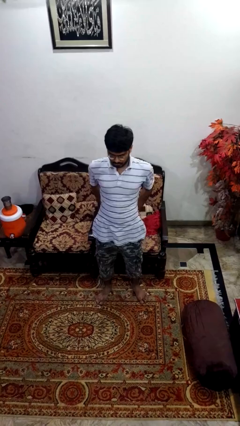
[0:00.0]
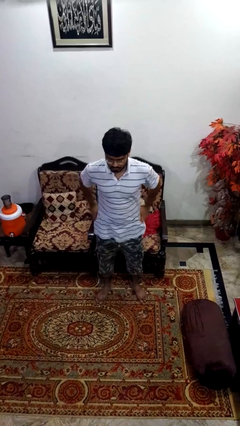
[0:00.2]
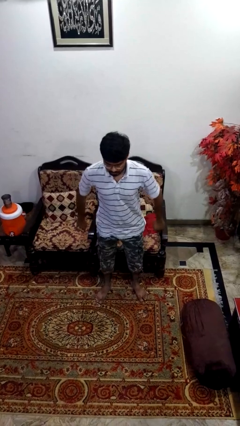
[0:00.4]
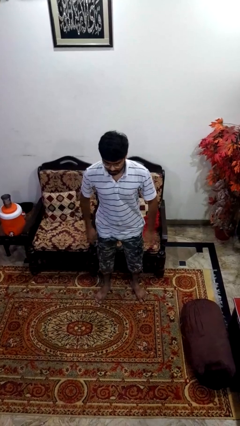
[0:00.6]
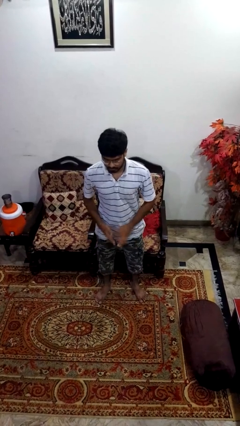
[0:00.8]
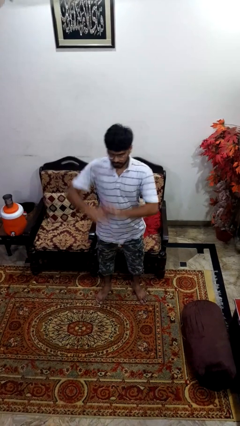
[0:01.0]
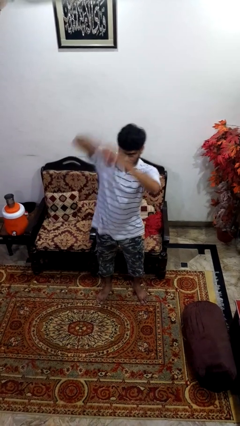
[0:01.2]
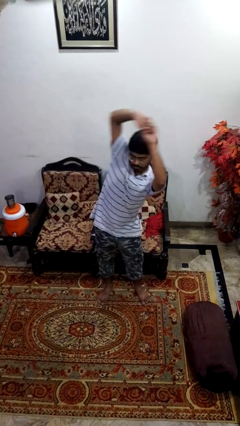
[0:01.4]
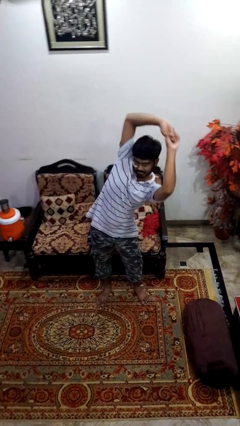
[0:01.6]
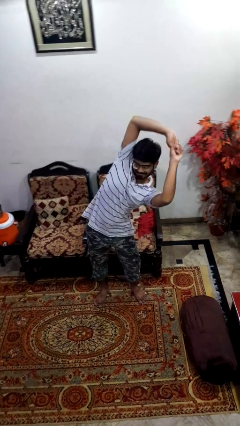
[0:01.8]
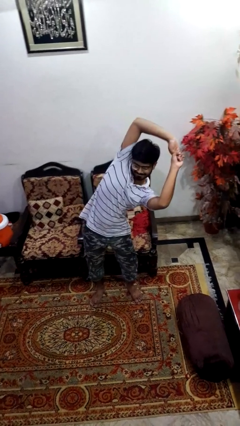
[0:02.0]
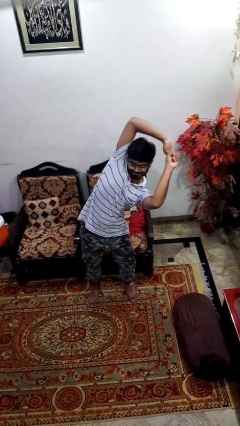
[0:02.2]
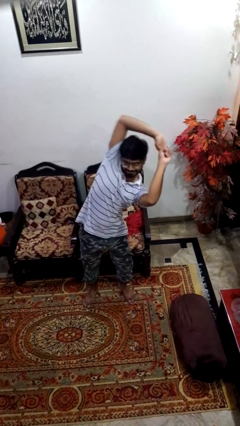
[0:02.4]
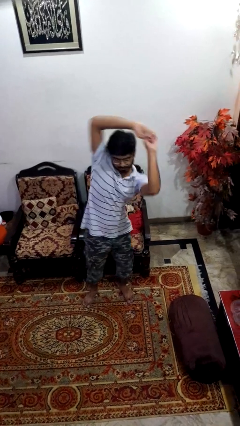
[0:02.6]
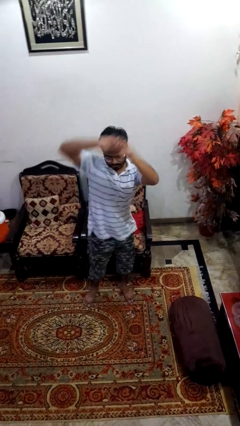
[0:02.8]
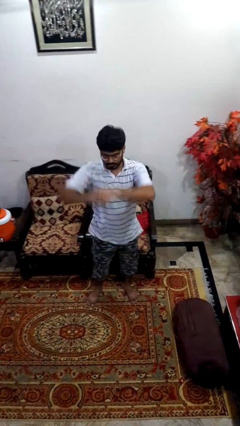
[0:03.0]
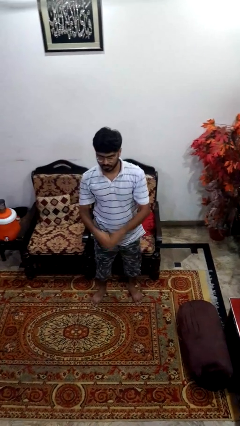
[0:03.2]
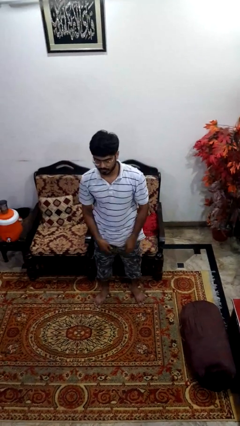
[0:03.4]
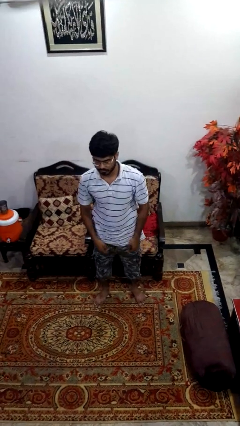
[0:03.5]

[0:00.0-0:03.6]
person stretches arms to side

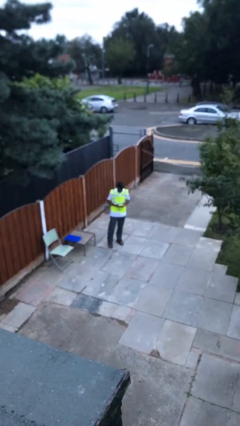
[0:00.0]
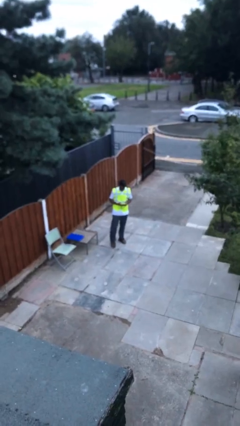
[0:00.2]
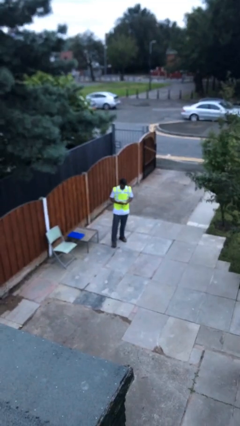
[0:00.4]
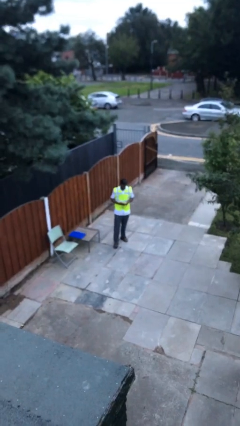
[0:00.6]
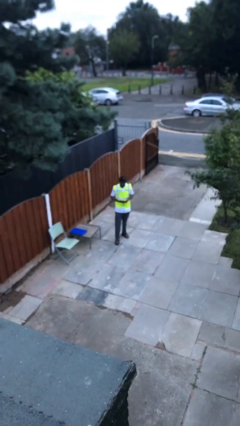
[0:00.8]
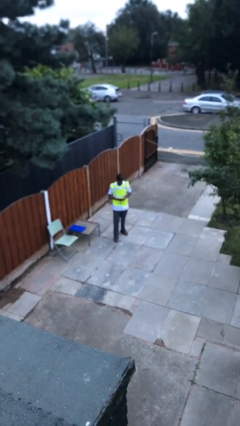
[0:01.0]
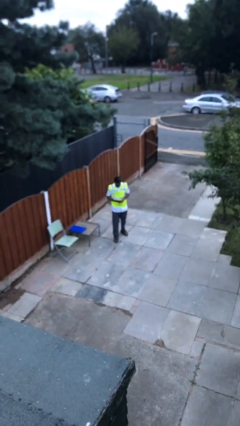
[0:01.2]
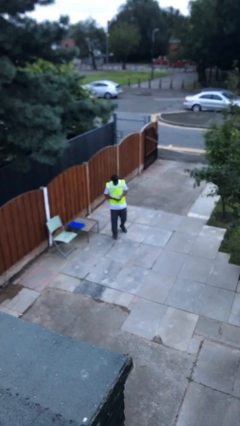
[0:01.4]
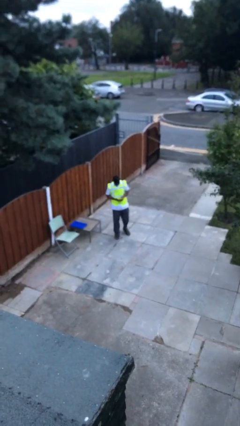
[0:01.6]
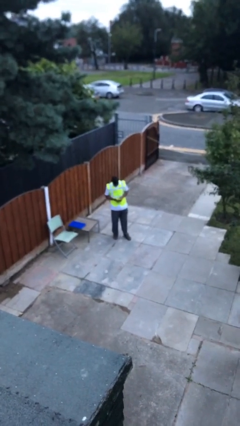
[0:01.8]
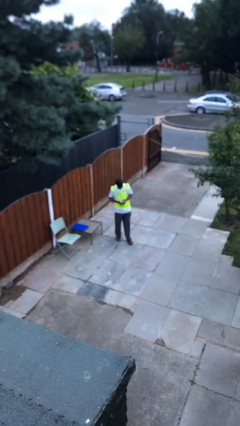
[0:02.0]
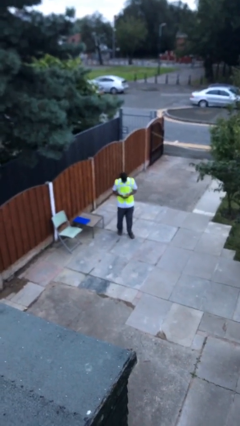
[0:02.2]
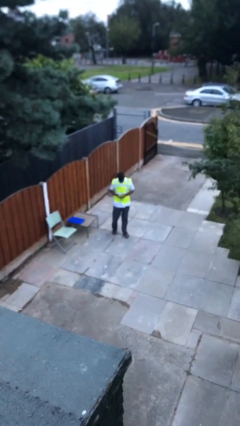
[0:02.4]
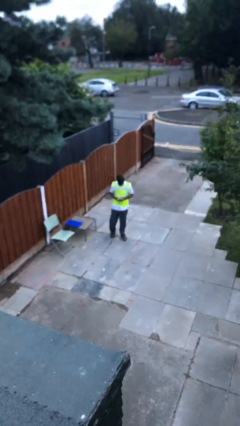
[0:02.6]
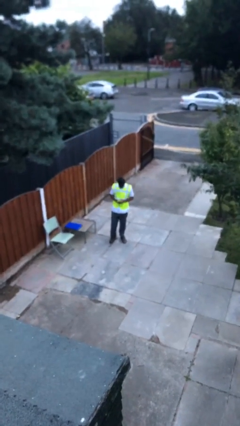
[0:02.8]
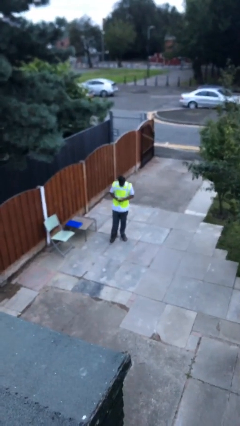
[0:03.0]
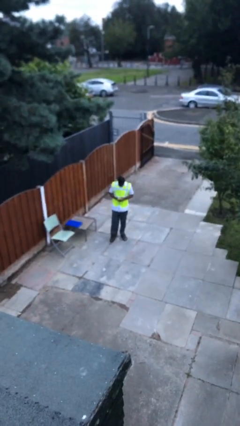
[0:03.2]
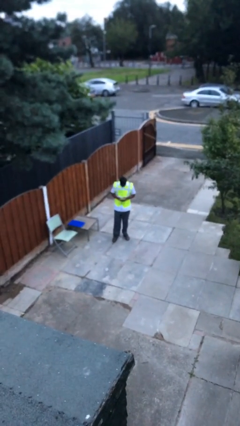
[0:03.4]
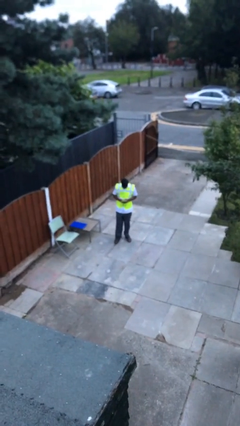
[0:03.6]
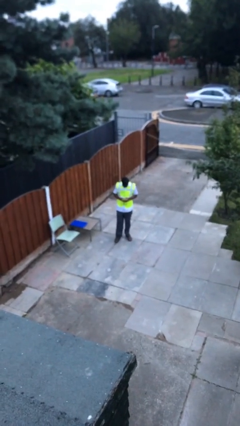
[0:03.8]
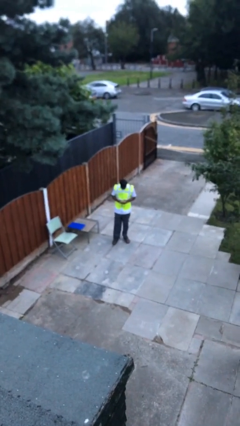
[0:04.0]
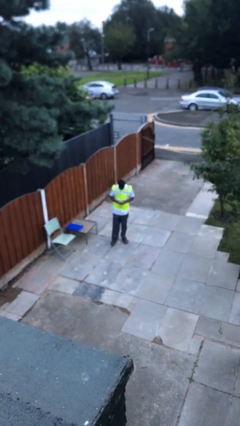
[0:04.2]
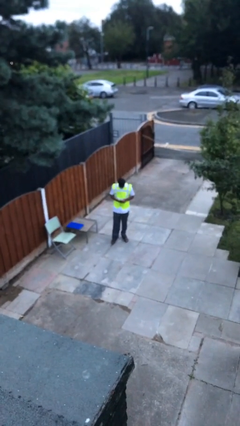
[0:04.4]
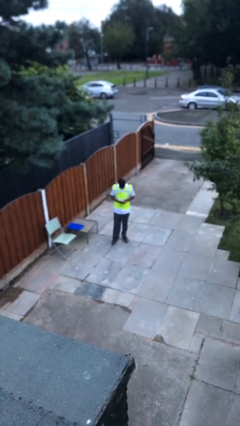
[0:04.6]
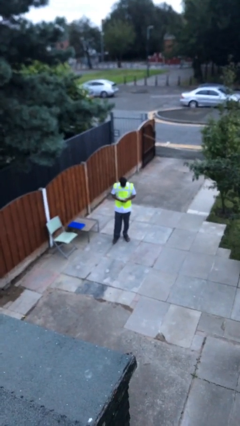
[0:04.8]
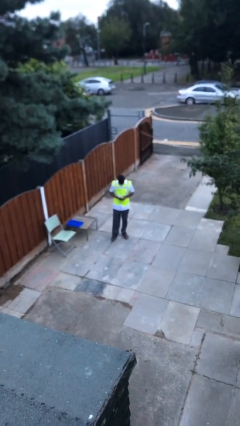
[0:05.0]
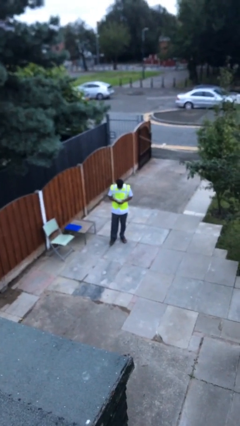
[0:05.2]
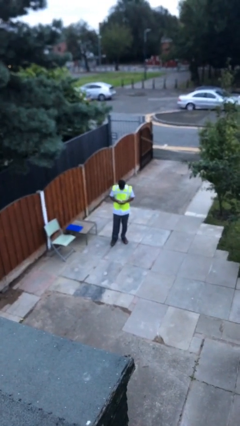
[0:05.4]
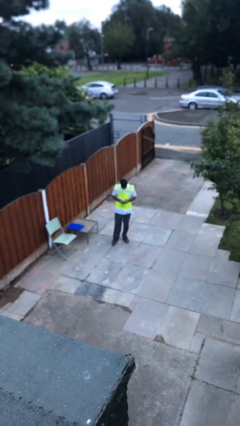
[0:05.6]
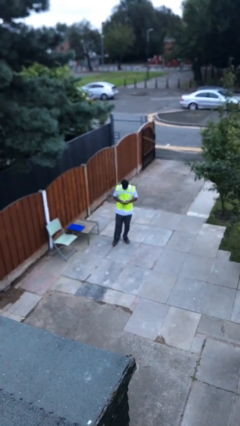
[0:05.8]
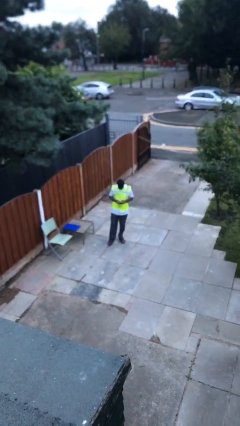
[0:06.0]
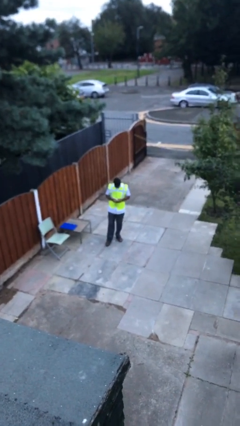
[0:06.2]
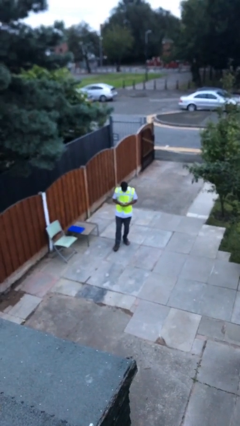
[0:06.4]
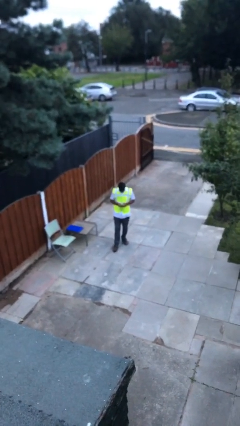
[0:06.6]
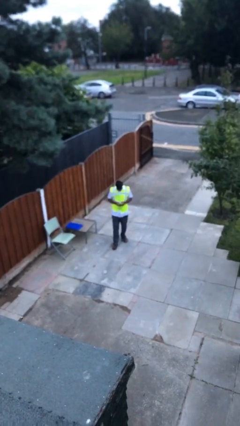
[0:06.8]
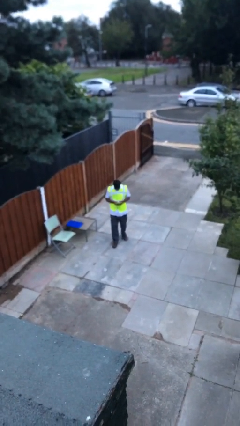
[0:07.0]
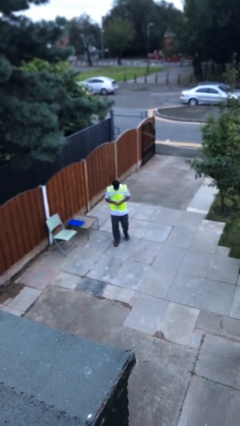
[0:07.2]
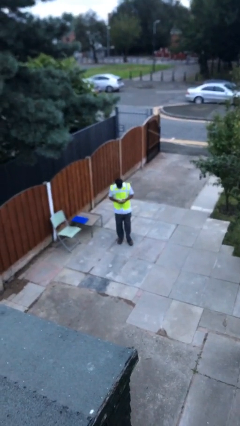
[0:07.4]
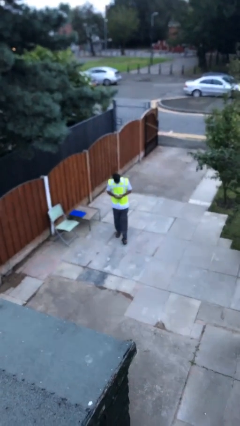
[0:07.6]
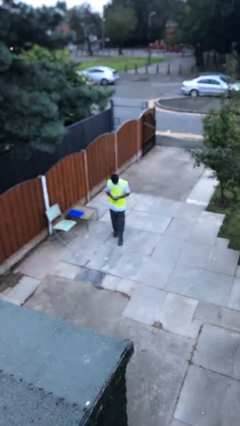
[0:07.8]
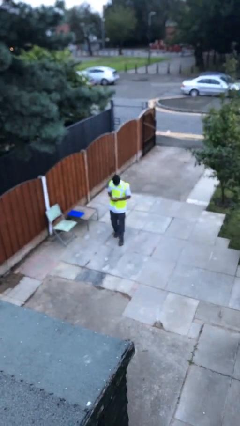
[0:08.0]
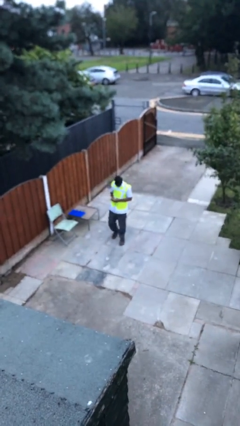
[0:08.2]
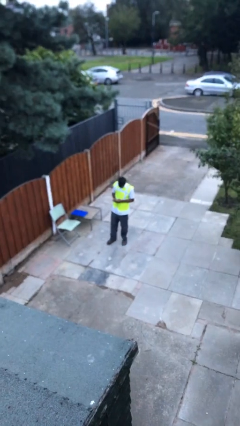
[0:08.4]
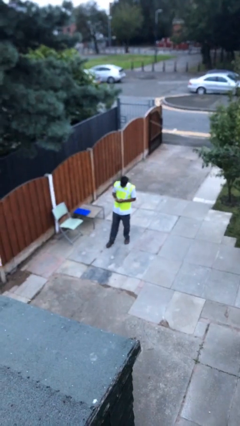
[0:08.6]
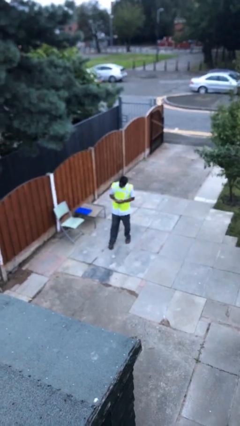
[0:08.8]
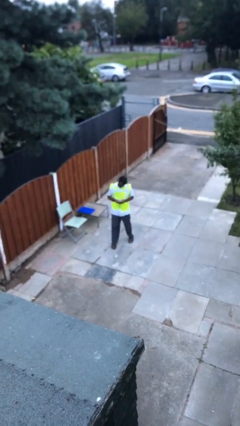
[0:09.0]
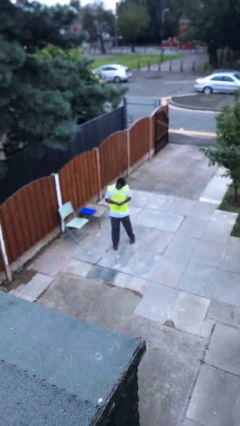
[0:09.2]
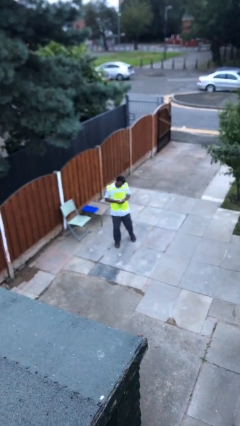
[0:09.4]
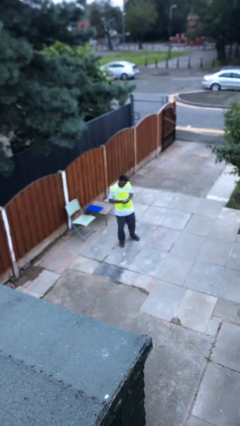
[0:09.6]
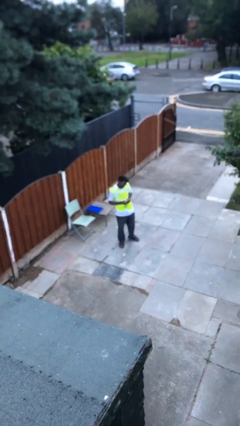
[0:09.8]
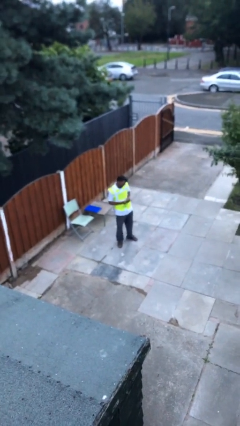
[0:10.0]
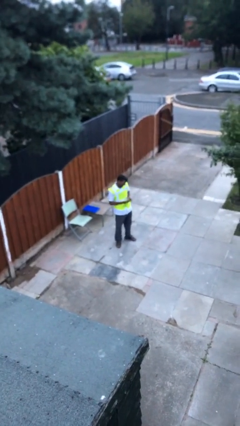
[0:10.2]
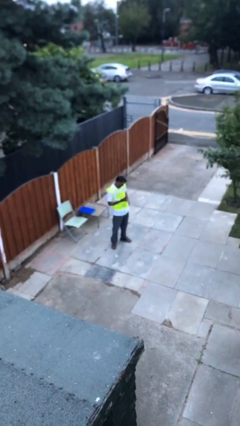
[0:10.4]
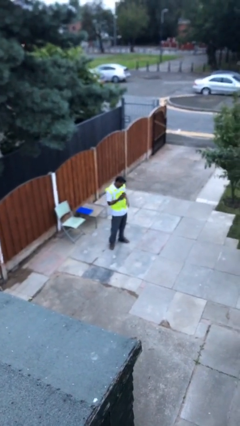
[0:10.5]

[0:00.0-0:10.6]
person texts on phone

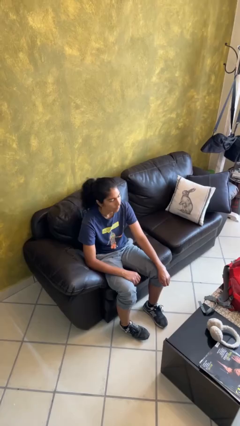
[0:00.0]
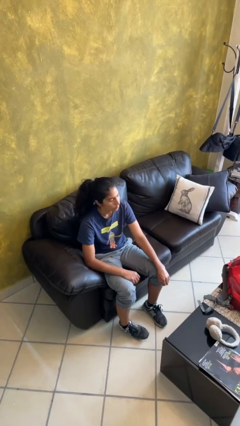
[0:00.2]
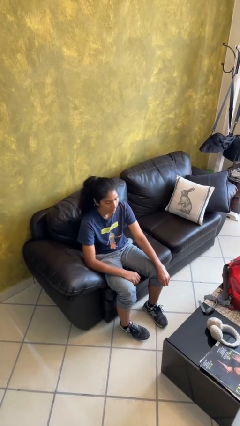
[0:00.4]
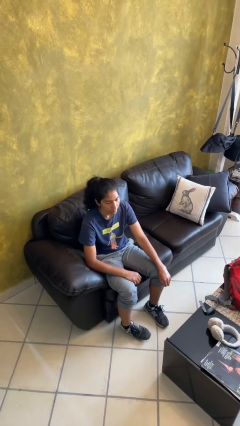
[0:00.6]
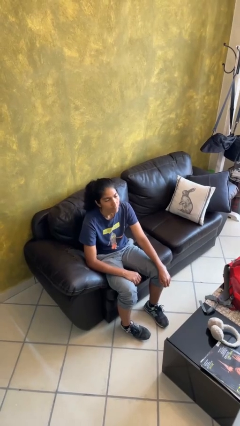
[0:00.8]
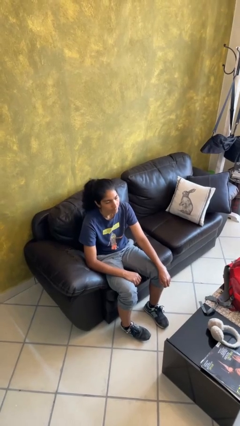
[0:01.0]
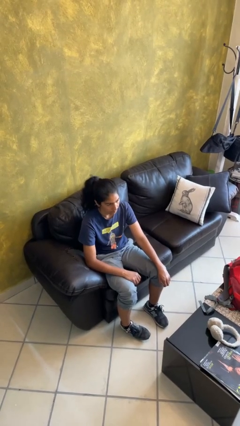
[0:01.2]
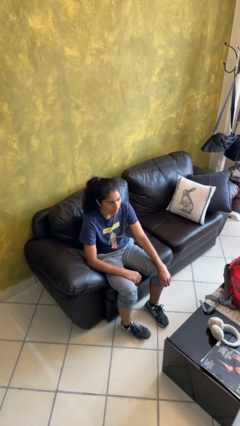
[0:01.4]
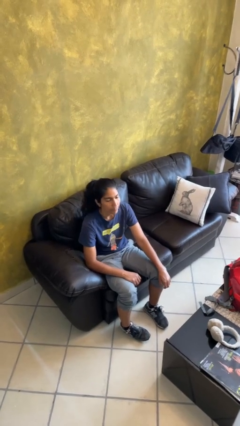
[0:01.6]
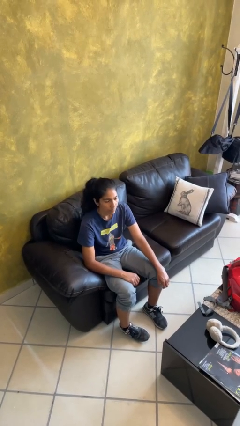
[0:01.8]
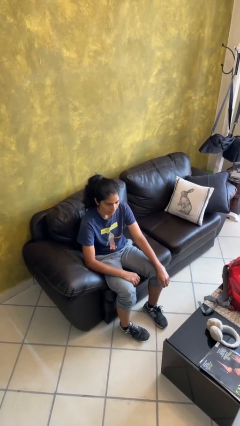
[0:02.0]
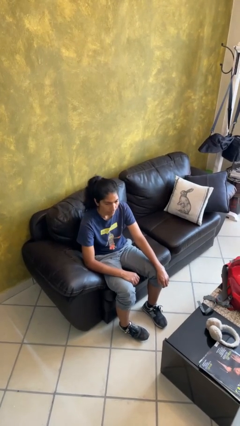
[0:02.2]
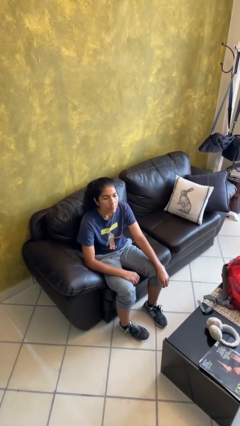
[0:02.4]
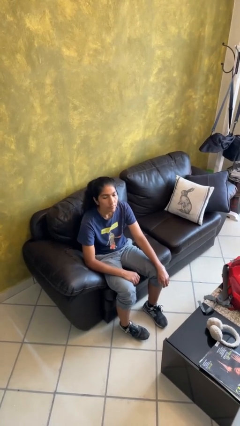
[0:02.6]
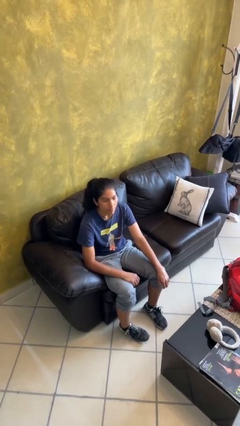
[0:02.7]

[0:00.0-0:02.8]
person nods head

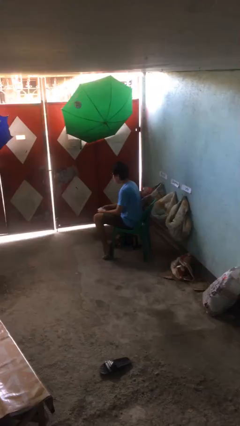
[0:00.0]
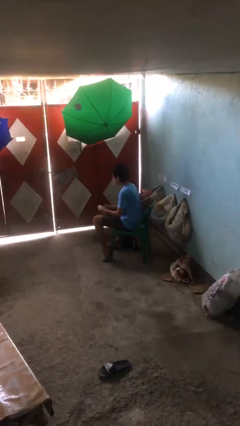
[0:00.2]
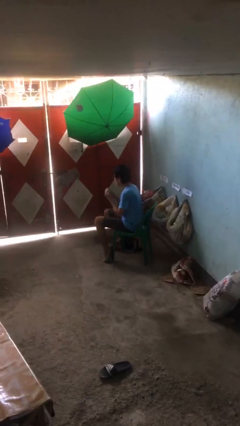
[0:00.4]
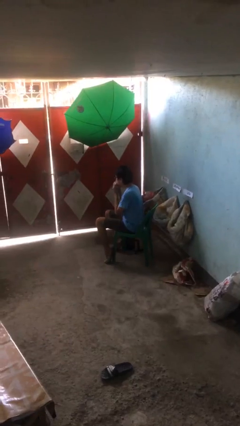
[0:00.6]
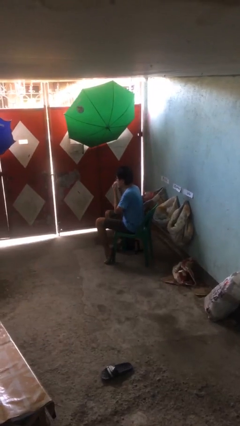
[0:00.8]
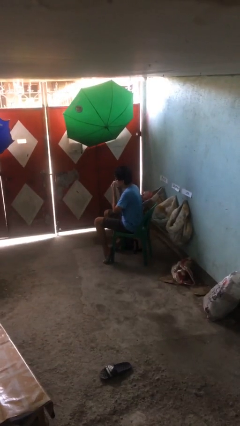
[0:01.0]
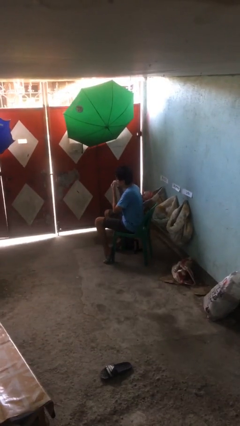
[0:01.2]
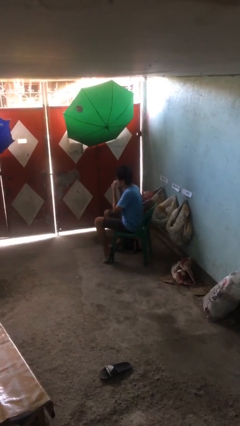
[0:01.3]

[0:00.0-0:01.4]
person wipes mouth with napkin
